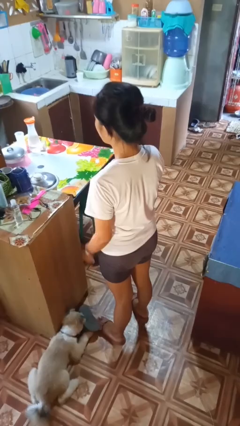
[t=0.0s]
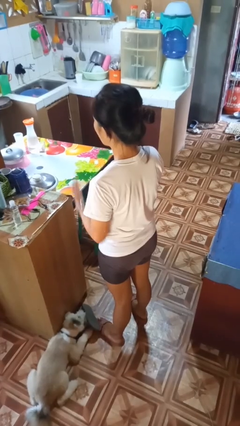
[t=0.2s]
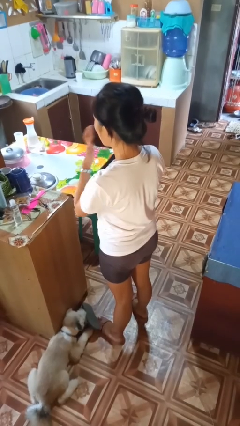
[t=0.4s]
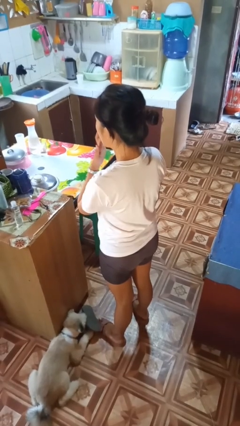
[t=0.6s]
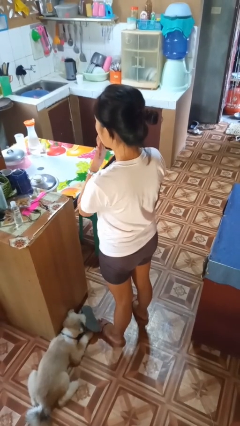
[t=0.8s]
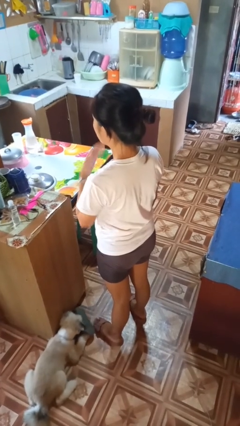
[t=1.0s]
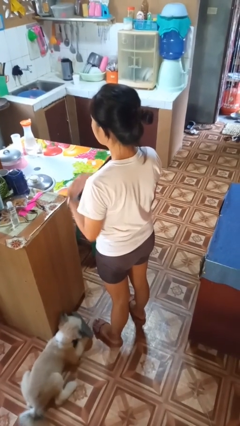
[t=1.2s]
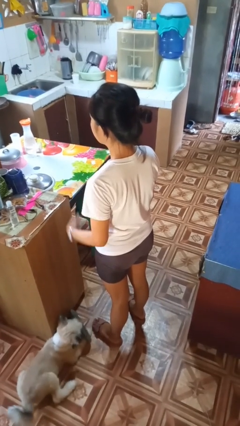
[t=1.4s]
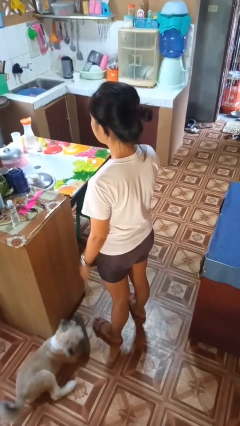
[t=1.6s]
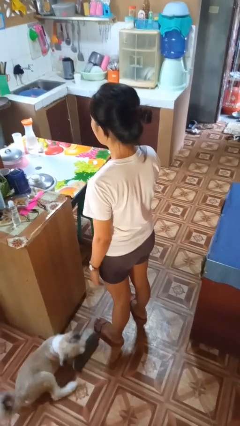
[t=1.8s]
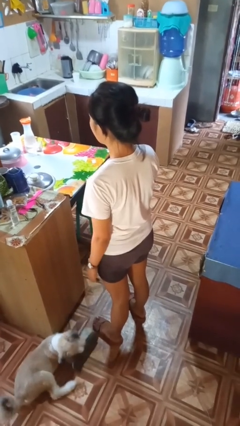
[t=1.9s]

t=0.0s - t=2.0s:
person licks fingers

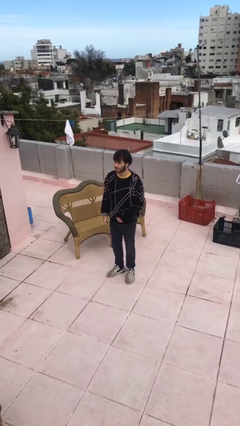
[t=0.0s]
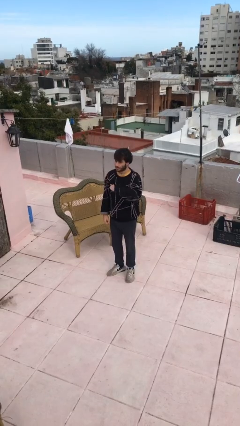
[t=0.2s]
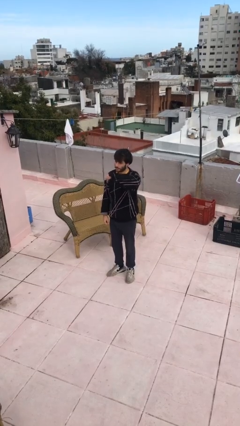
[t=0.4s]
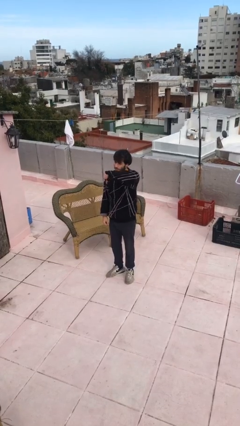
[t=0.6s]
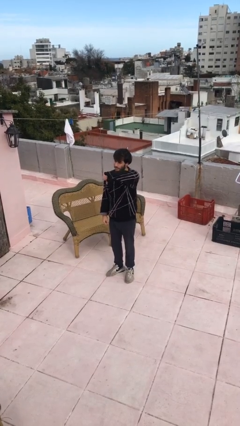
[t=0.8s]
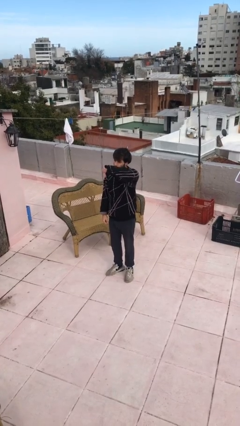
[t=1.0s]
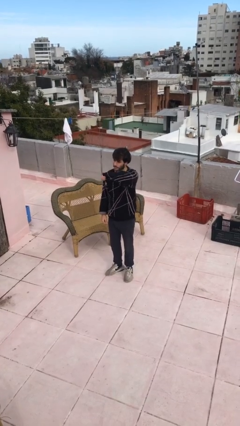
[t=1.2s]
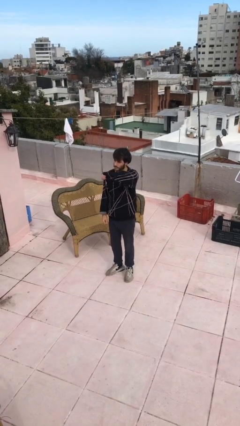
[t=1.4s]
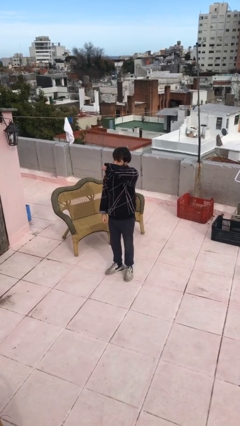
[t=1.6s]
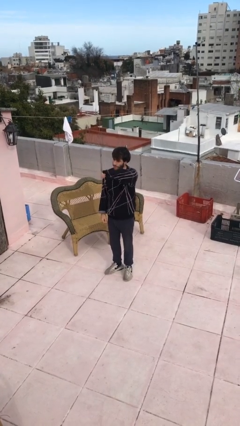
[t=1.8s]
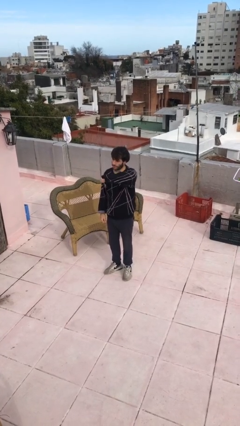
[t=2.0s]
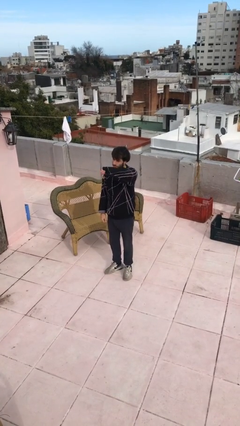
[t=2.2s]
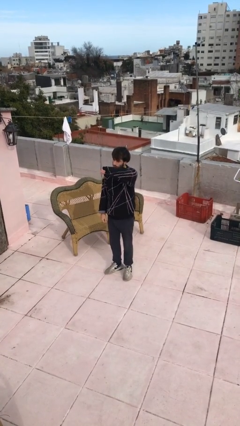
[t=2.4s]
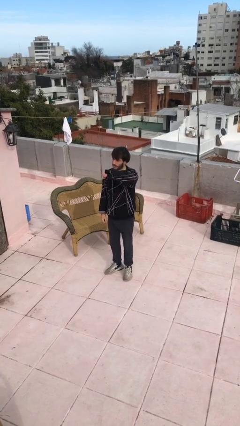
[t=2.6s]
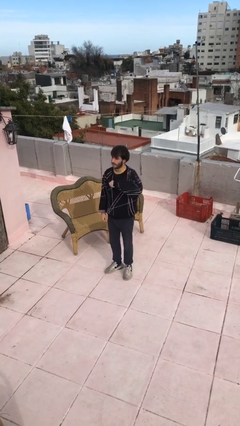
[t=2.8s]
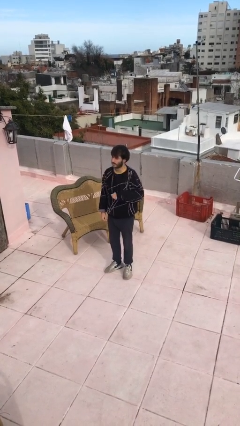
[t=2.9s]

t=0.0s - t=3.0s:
person gestures thumbs down

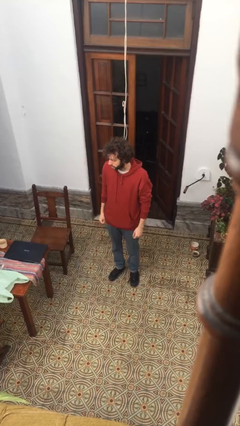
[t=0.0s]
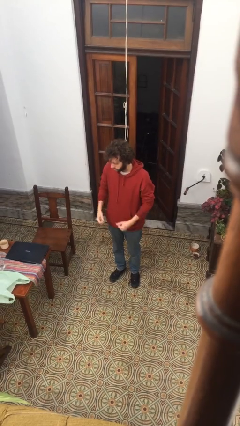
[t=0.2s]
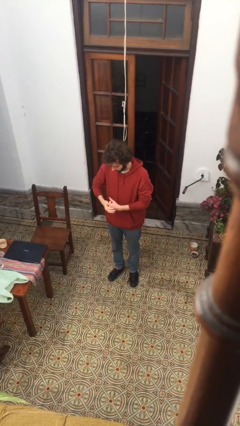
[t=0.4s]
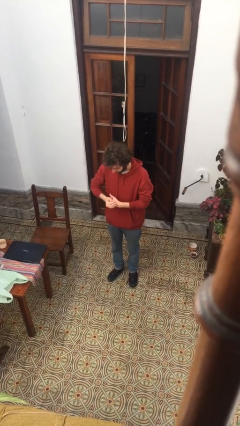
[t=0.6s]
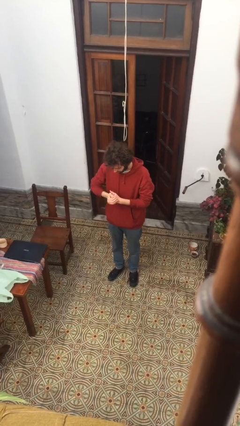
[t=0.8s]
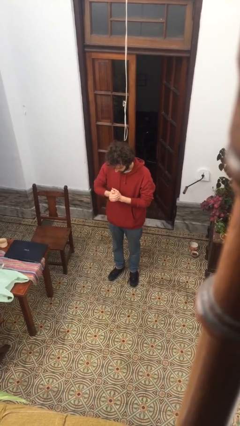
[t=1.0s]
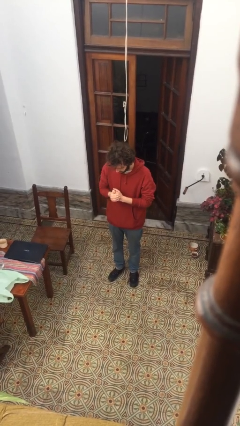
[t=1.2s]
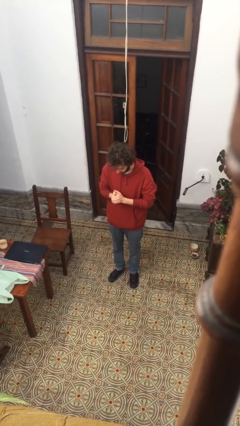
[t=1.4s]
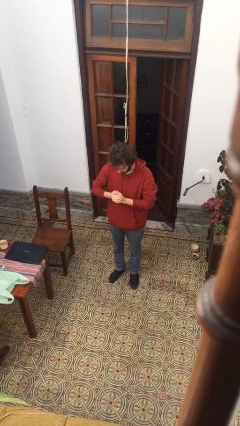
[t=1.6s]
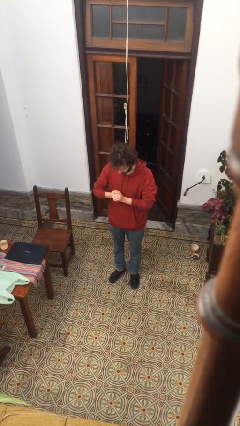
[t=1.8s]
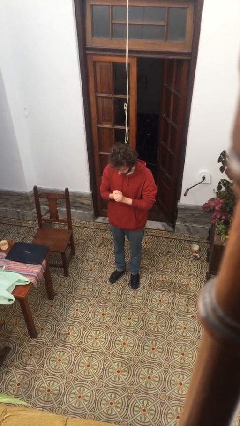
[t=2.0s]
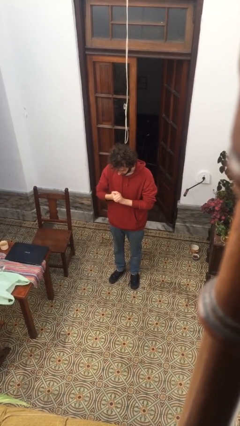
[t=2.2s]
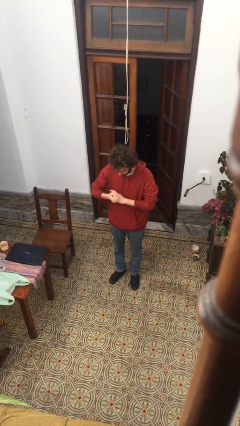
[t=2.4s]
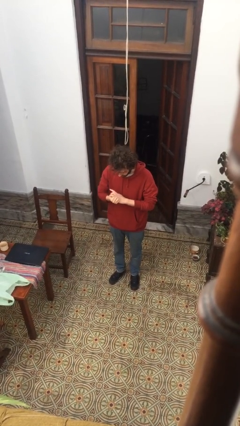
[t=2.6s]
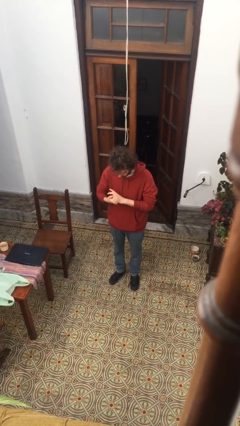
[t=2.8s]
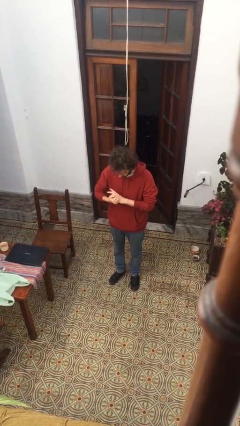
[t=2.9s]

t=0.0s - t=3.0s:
person cracks knuckles

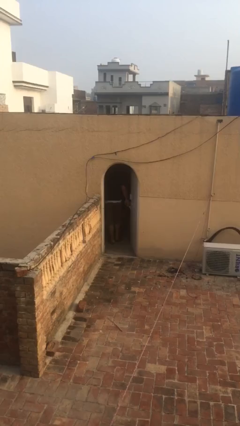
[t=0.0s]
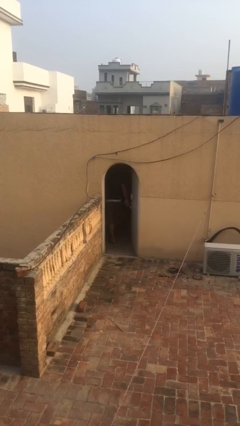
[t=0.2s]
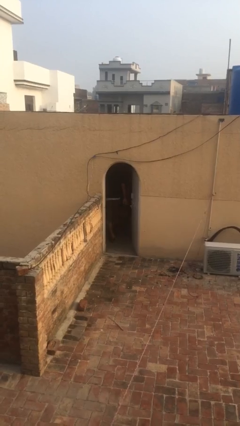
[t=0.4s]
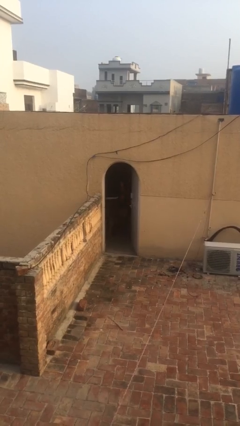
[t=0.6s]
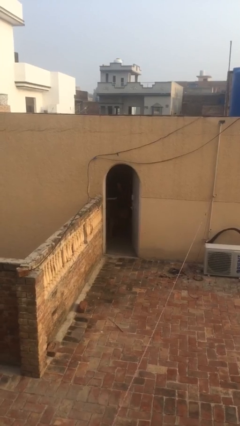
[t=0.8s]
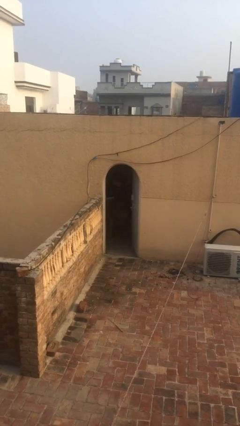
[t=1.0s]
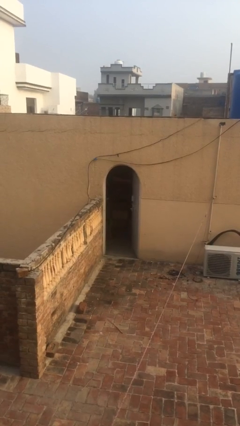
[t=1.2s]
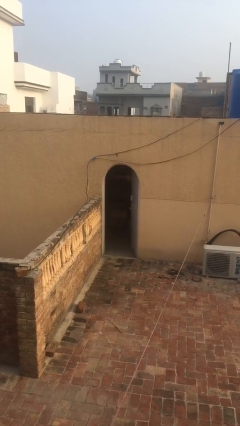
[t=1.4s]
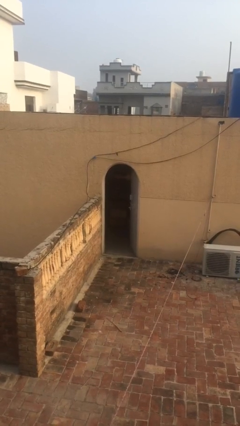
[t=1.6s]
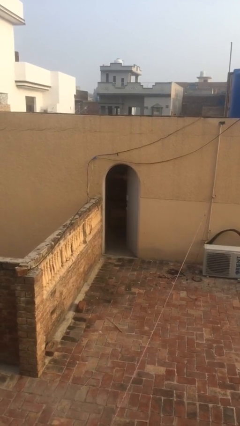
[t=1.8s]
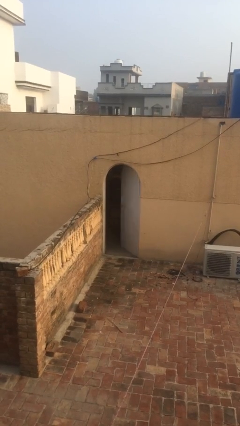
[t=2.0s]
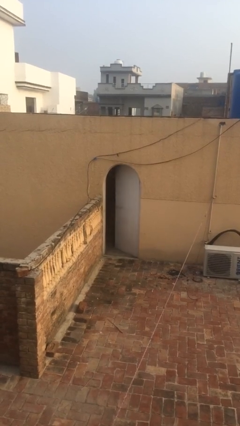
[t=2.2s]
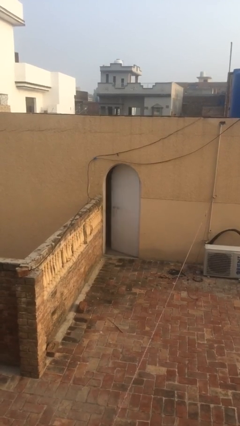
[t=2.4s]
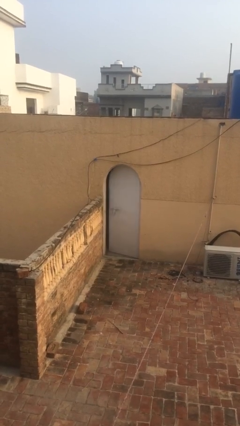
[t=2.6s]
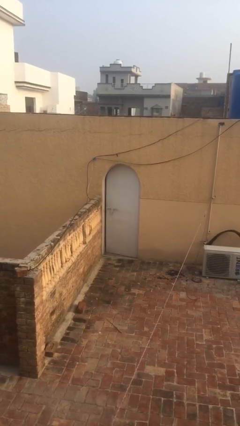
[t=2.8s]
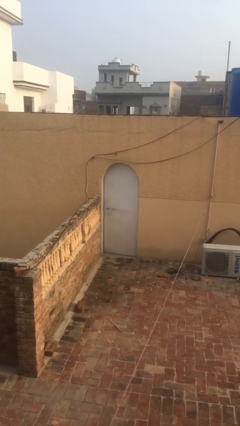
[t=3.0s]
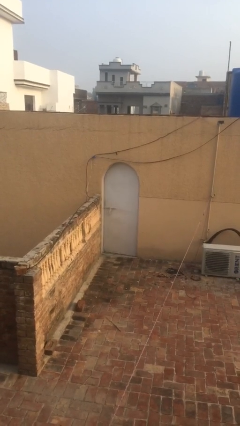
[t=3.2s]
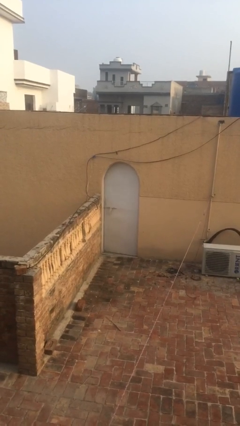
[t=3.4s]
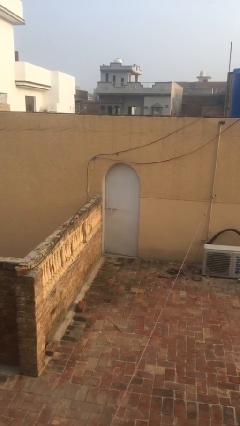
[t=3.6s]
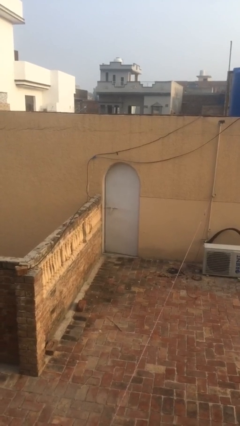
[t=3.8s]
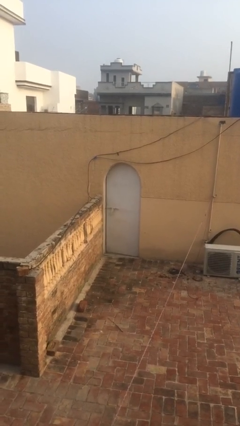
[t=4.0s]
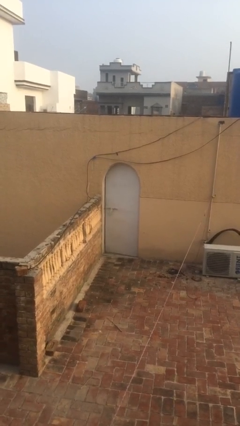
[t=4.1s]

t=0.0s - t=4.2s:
person closes facility door

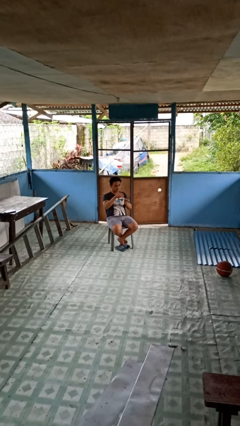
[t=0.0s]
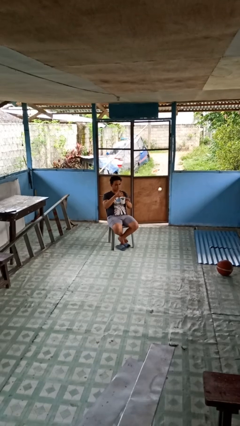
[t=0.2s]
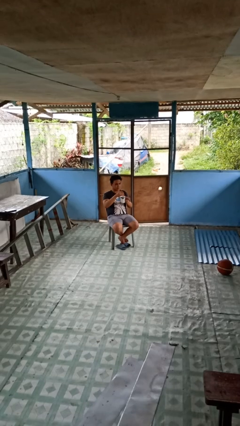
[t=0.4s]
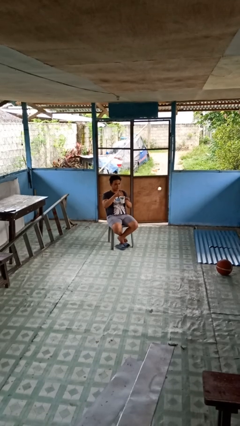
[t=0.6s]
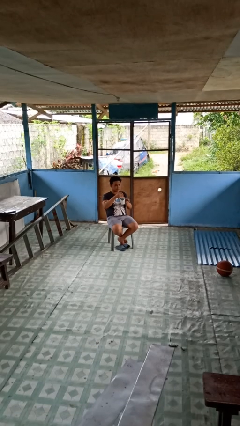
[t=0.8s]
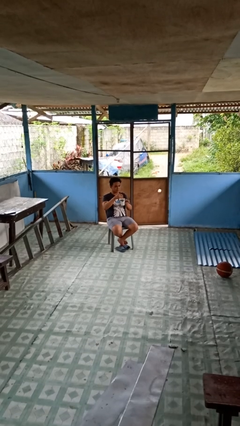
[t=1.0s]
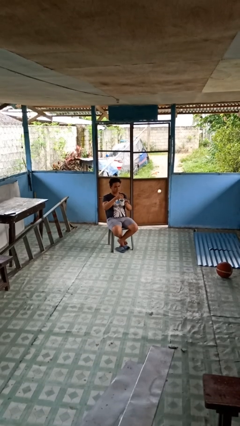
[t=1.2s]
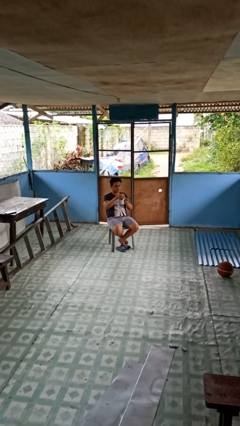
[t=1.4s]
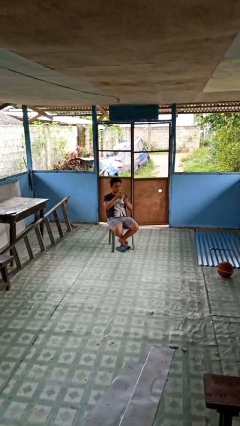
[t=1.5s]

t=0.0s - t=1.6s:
person stirs mug

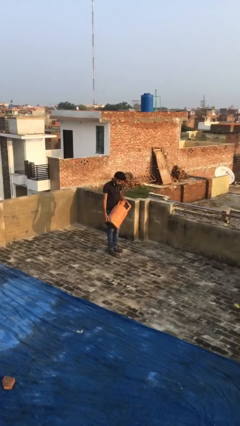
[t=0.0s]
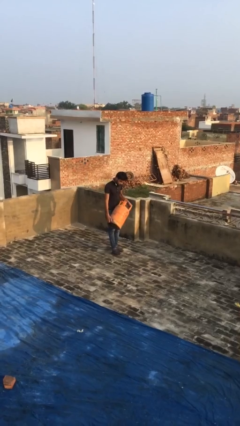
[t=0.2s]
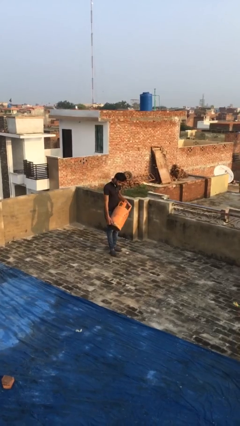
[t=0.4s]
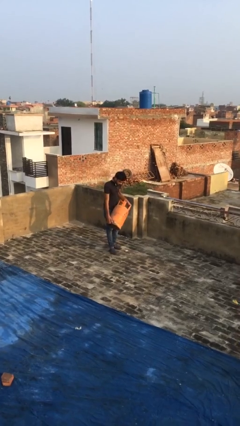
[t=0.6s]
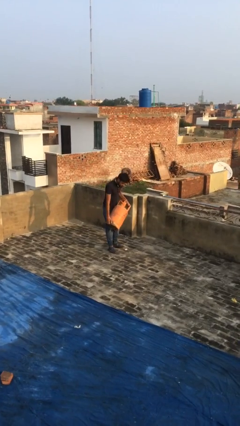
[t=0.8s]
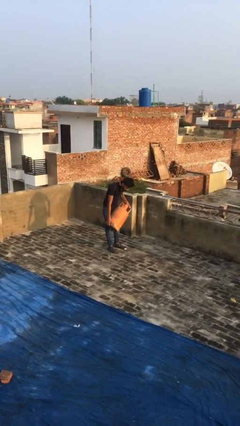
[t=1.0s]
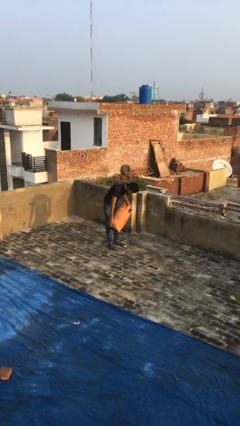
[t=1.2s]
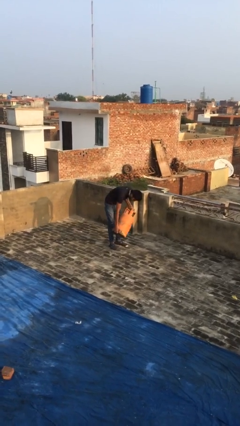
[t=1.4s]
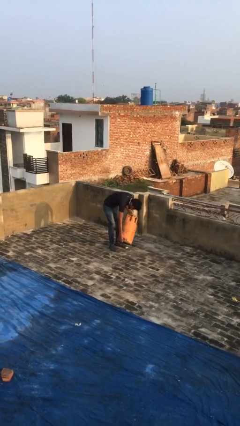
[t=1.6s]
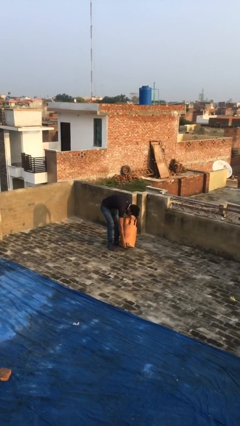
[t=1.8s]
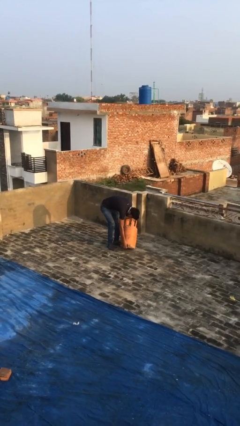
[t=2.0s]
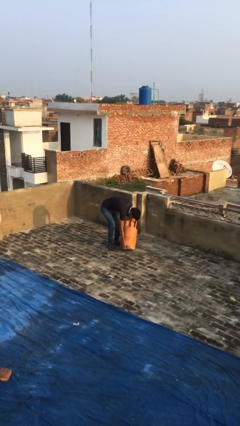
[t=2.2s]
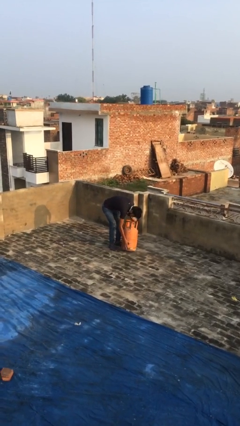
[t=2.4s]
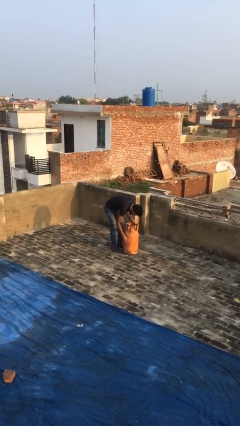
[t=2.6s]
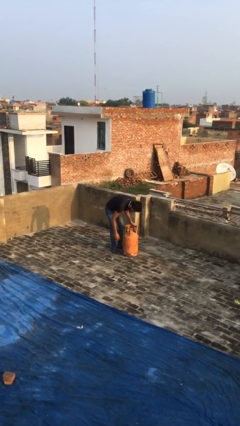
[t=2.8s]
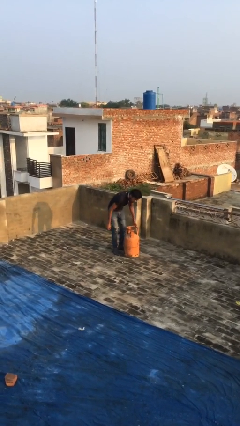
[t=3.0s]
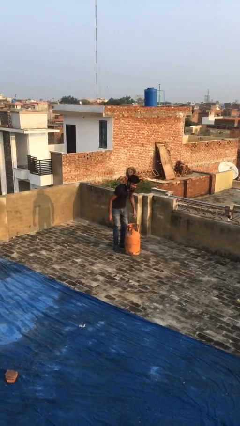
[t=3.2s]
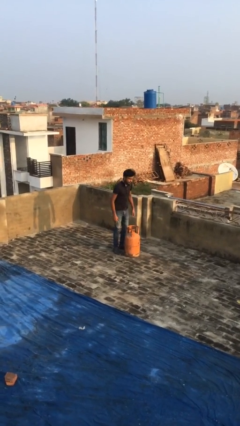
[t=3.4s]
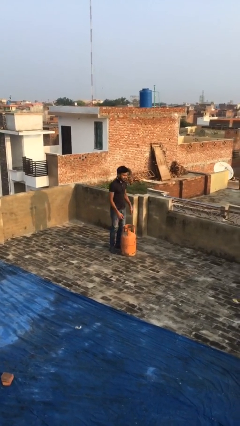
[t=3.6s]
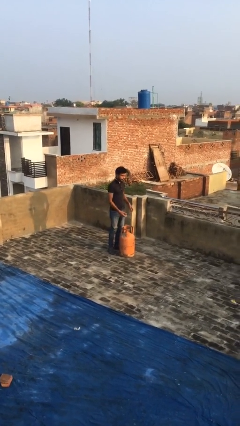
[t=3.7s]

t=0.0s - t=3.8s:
person puts down object on floor
